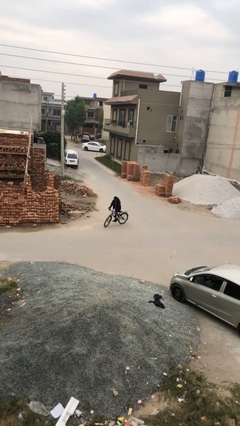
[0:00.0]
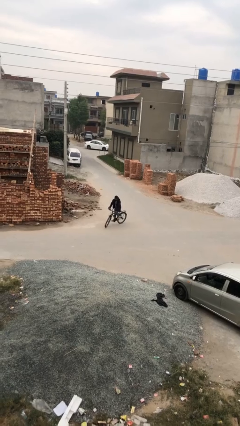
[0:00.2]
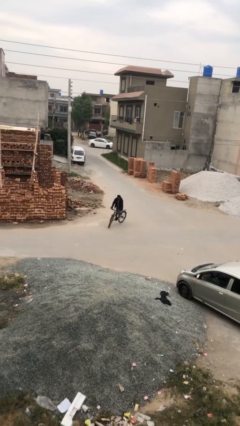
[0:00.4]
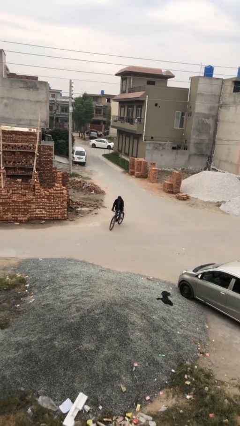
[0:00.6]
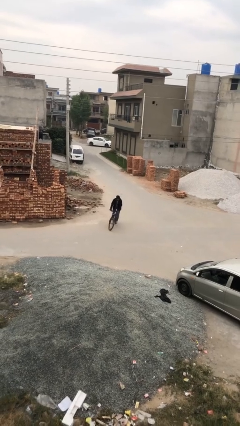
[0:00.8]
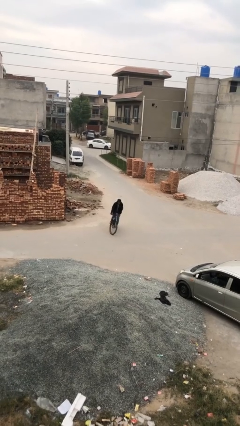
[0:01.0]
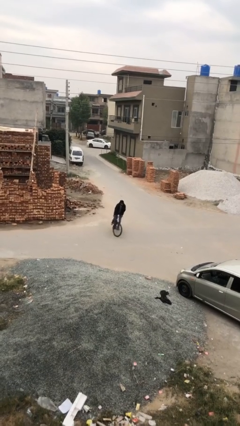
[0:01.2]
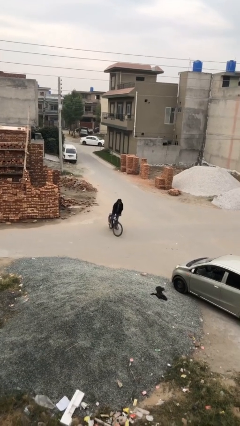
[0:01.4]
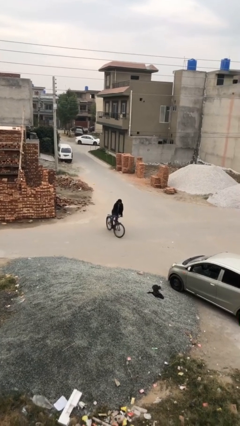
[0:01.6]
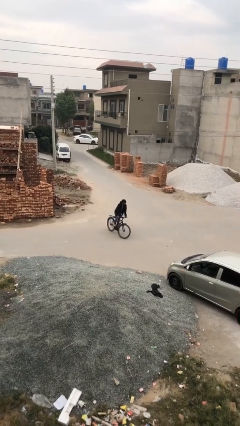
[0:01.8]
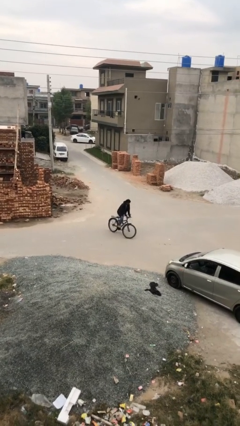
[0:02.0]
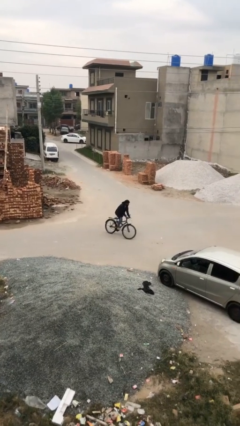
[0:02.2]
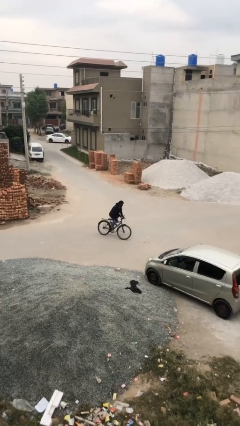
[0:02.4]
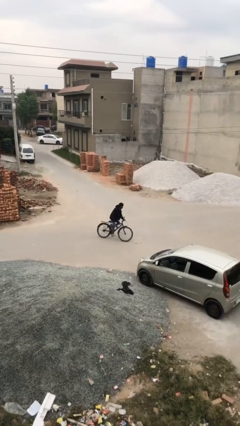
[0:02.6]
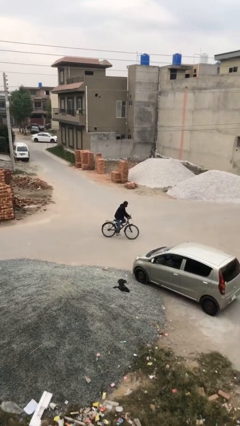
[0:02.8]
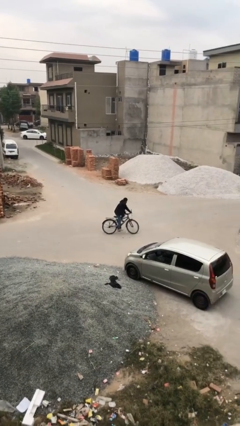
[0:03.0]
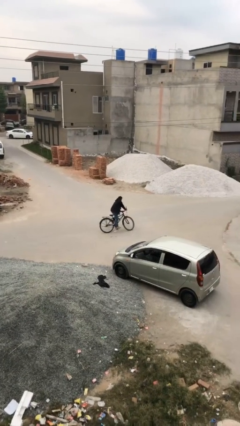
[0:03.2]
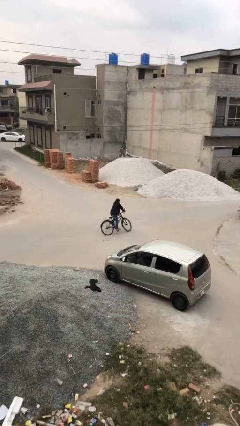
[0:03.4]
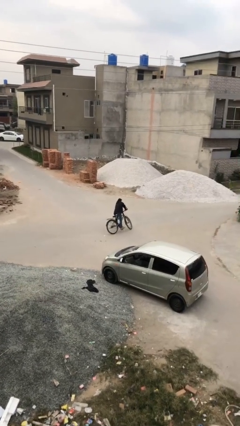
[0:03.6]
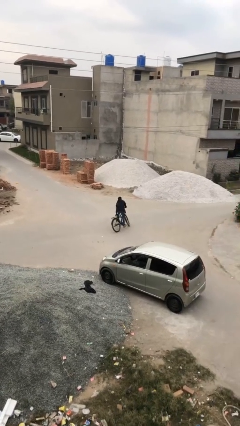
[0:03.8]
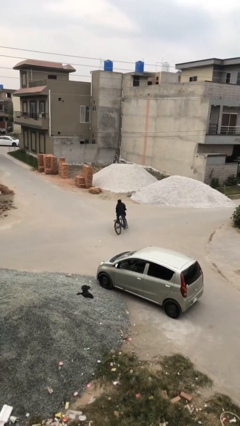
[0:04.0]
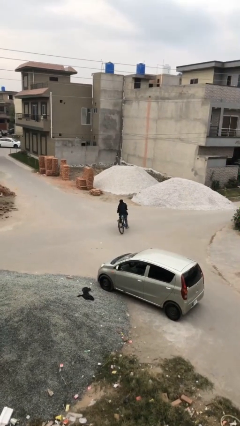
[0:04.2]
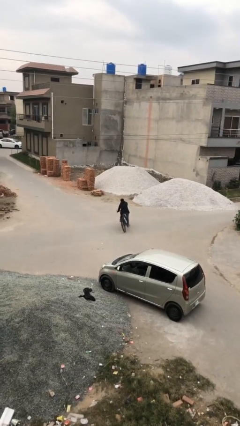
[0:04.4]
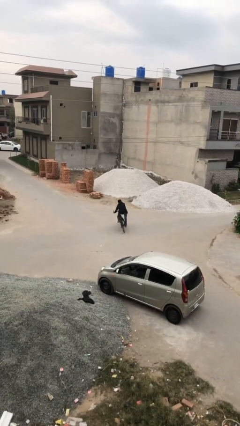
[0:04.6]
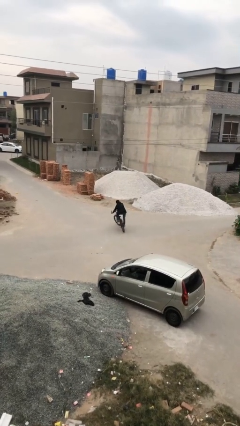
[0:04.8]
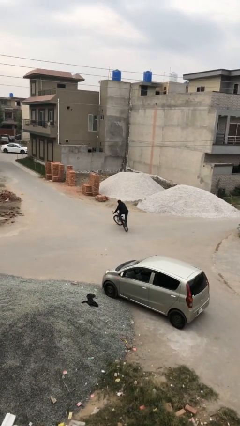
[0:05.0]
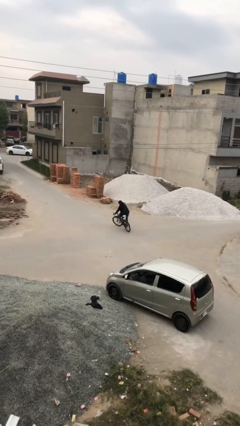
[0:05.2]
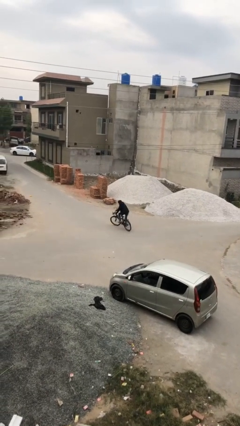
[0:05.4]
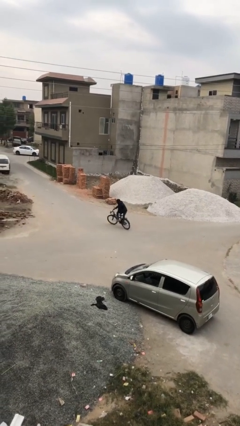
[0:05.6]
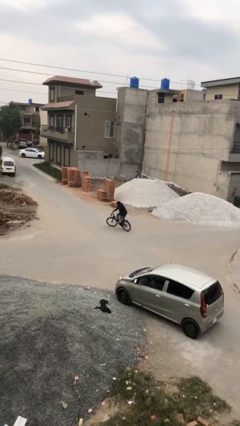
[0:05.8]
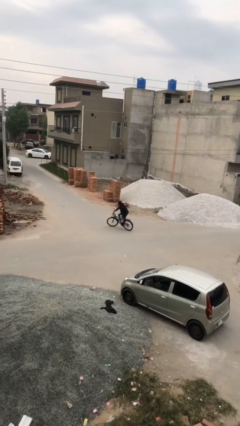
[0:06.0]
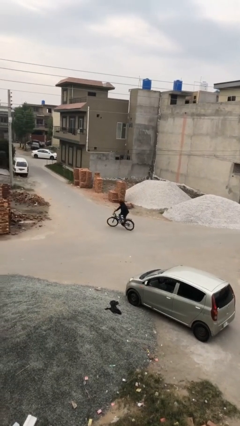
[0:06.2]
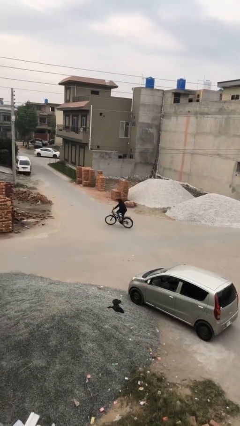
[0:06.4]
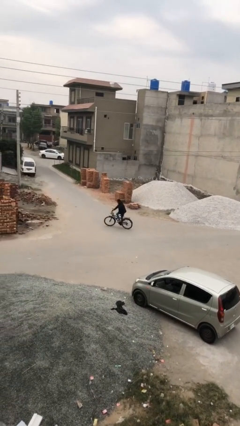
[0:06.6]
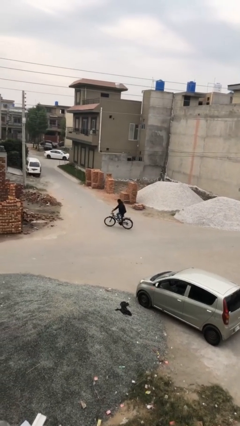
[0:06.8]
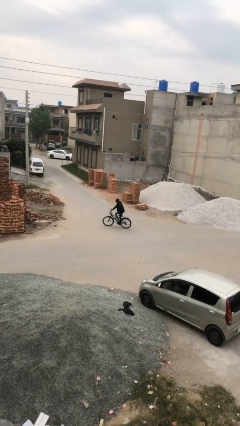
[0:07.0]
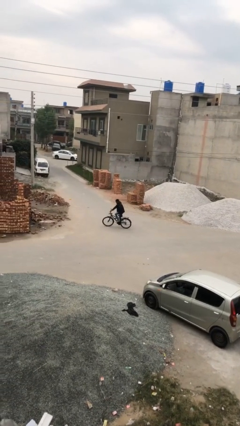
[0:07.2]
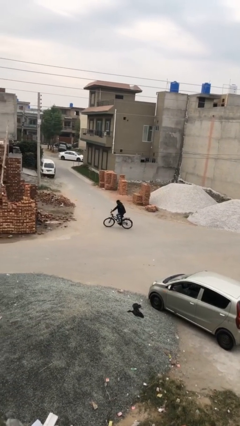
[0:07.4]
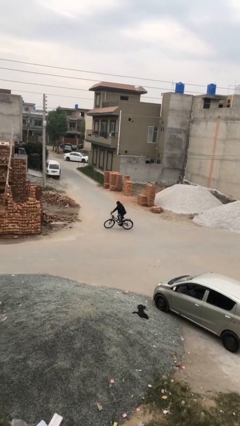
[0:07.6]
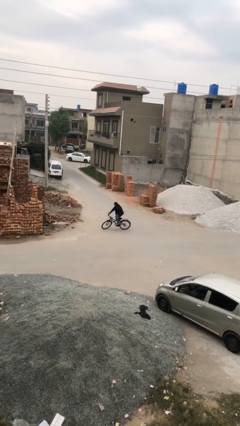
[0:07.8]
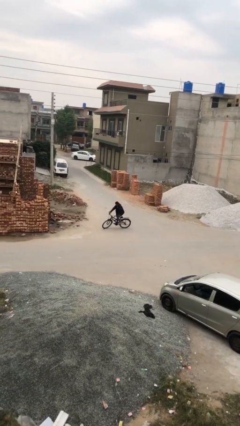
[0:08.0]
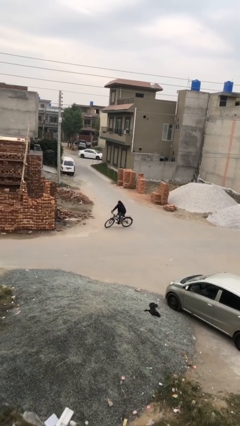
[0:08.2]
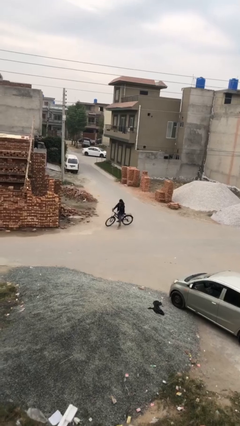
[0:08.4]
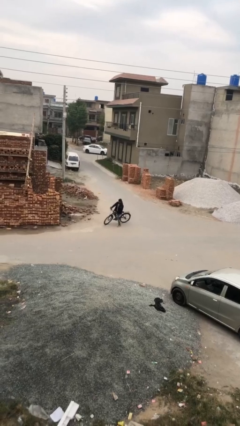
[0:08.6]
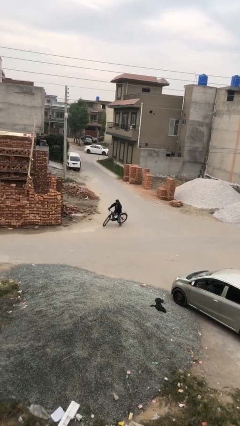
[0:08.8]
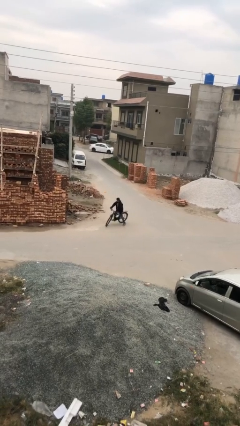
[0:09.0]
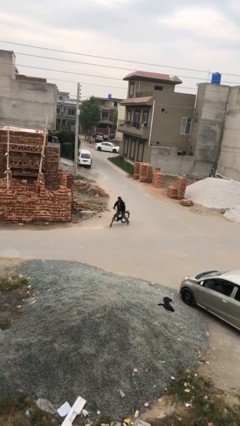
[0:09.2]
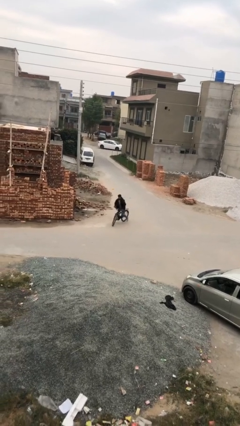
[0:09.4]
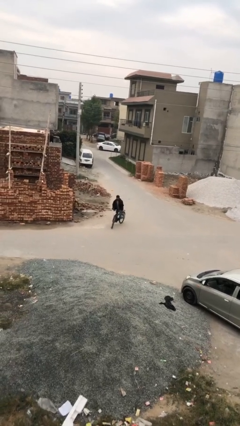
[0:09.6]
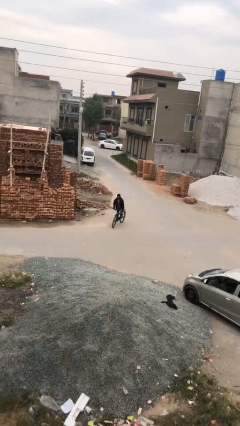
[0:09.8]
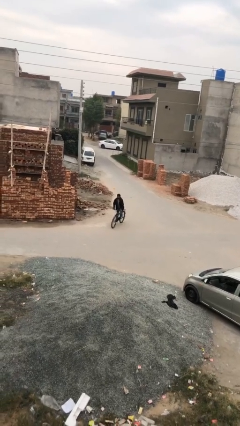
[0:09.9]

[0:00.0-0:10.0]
person rides bicycle

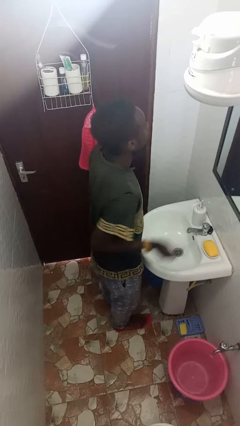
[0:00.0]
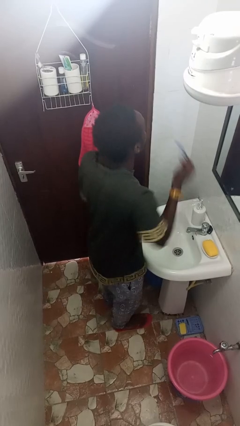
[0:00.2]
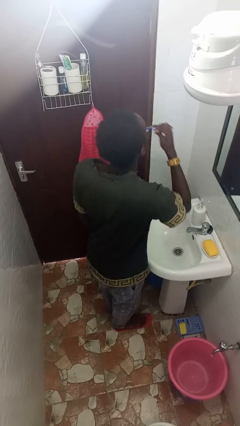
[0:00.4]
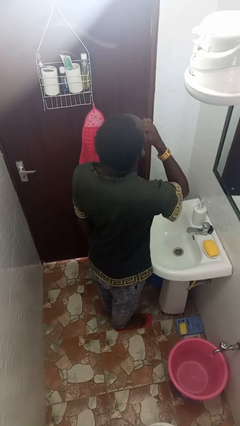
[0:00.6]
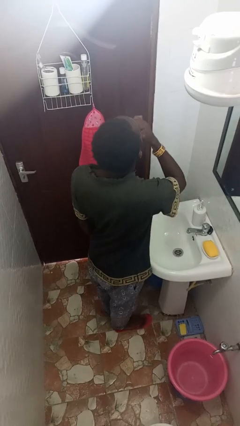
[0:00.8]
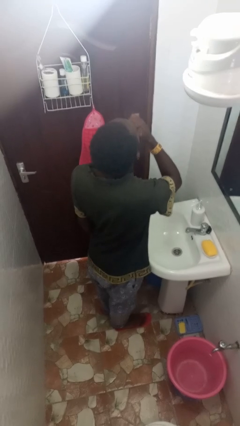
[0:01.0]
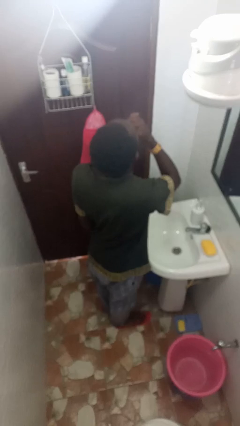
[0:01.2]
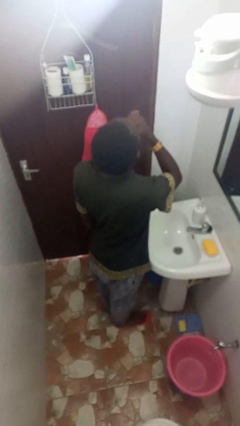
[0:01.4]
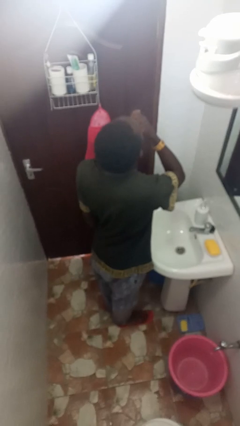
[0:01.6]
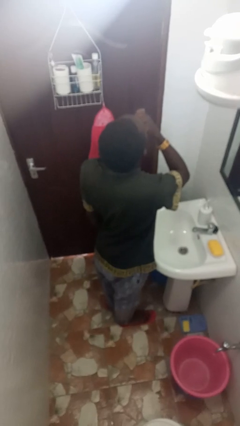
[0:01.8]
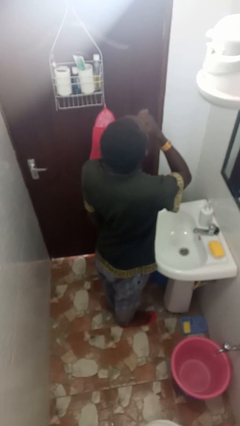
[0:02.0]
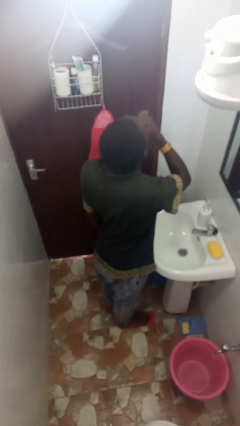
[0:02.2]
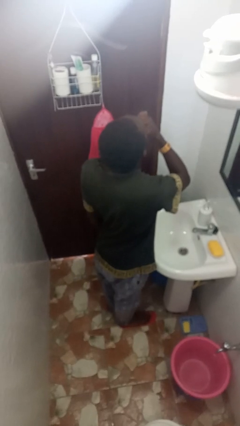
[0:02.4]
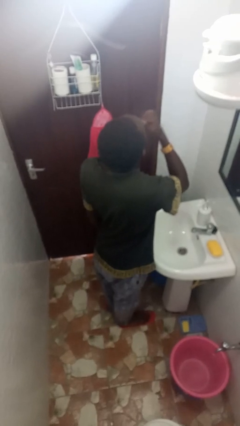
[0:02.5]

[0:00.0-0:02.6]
person brushes teeth

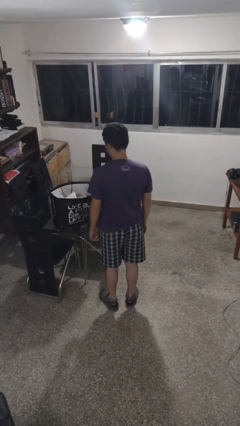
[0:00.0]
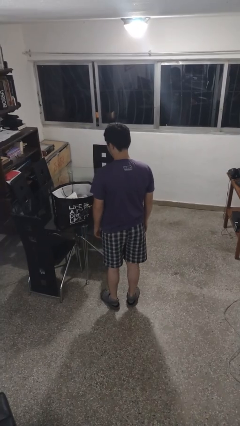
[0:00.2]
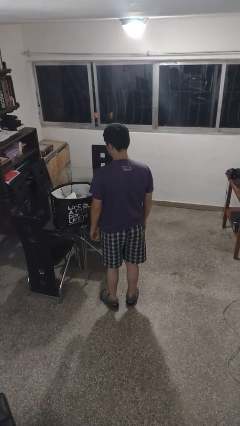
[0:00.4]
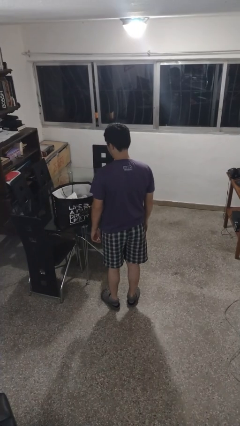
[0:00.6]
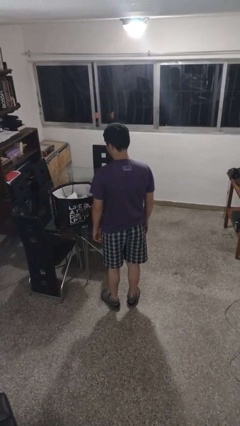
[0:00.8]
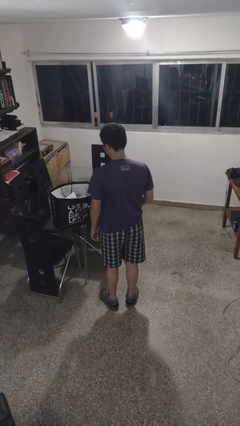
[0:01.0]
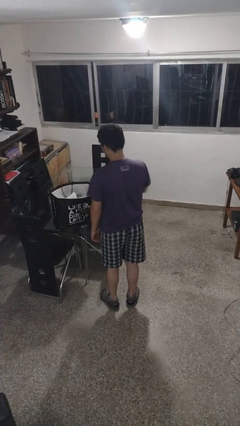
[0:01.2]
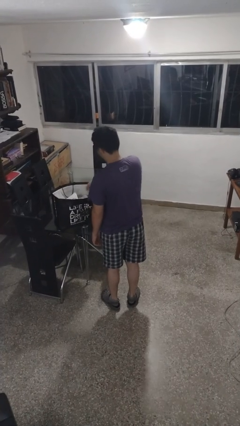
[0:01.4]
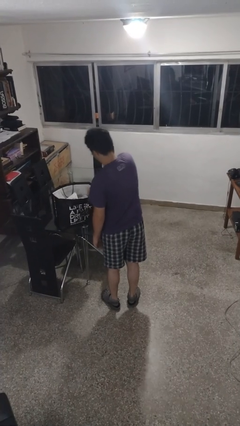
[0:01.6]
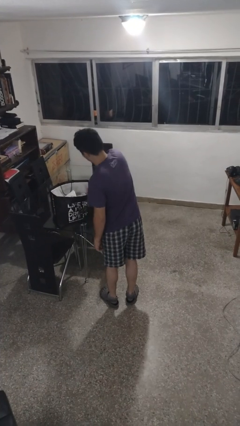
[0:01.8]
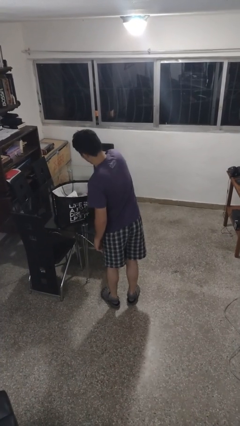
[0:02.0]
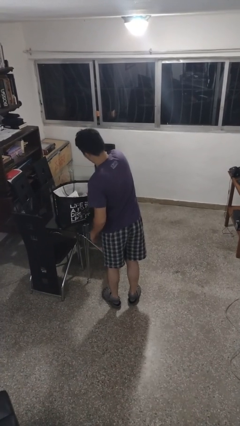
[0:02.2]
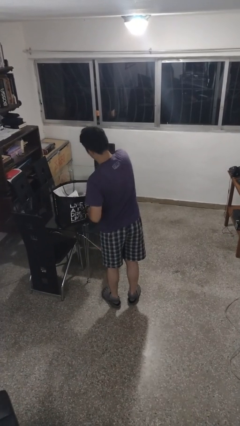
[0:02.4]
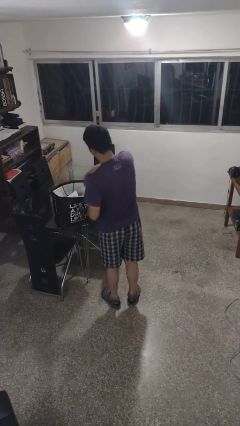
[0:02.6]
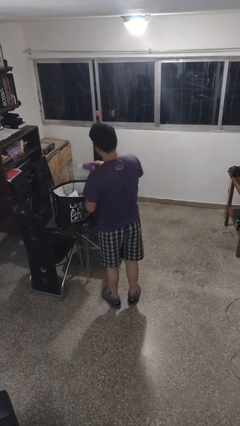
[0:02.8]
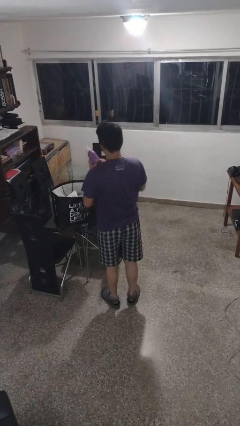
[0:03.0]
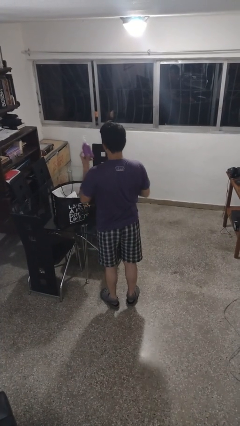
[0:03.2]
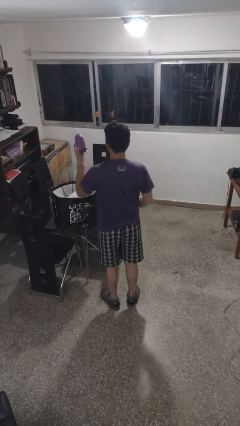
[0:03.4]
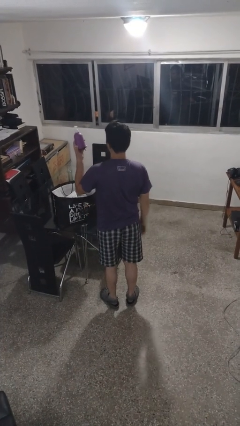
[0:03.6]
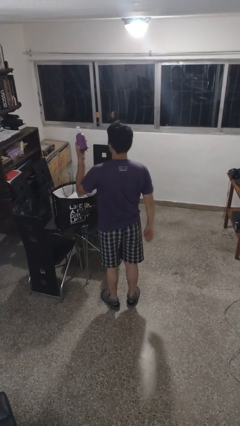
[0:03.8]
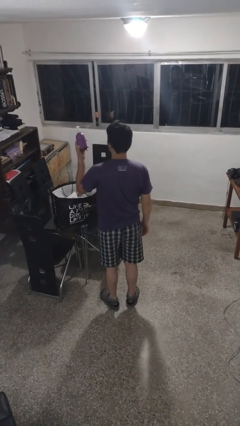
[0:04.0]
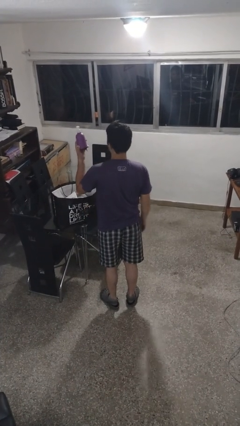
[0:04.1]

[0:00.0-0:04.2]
person takes object from bag

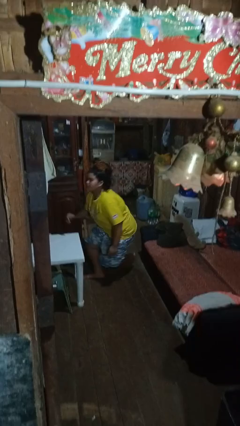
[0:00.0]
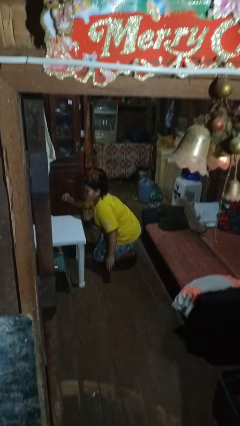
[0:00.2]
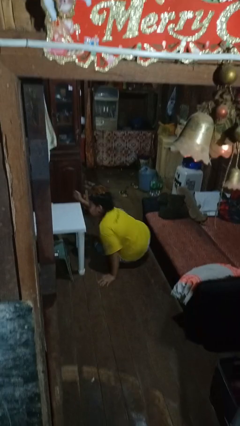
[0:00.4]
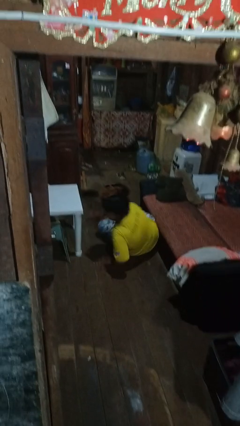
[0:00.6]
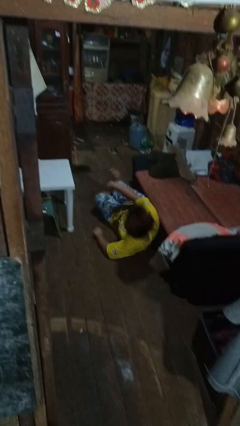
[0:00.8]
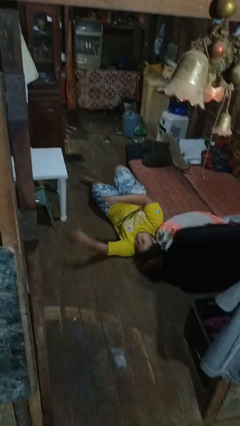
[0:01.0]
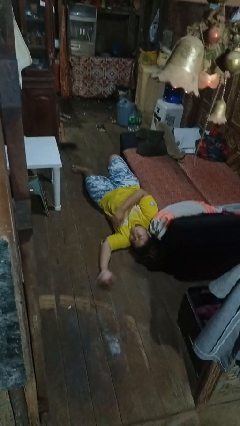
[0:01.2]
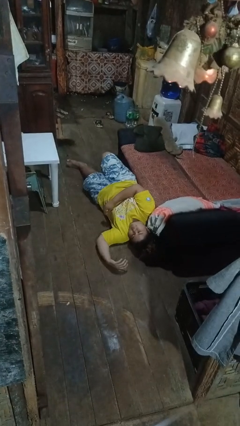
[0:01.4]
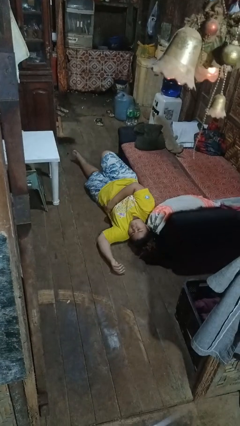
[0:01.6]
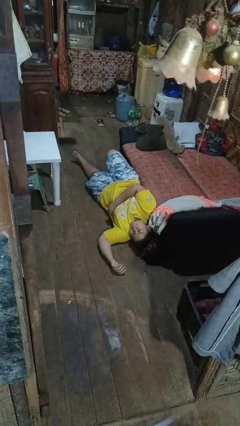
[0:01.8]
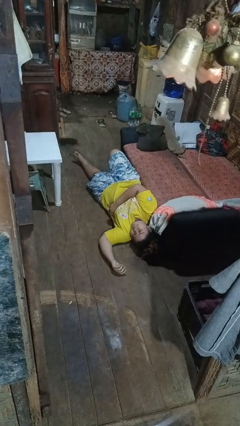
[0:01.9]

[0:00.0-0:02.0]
person falls while standing
